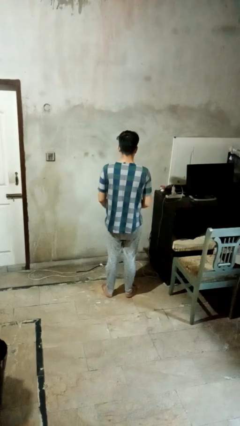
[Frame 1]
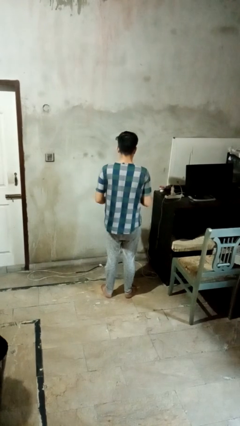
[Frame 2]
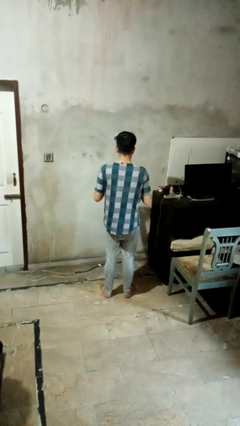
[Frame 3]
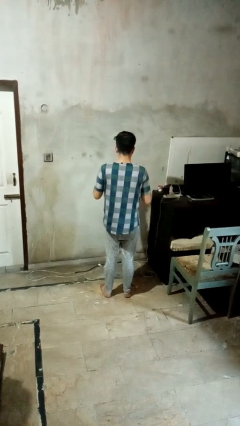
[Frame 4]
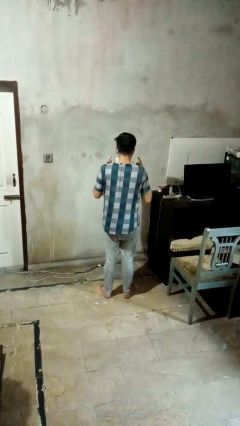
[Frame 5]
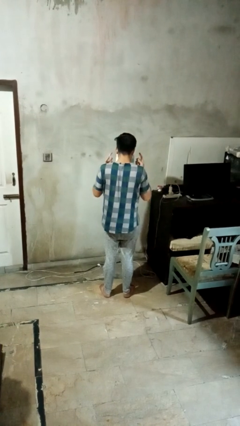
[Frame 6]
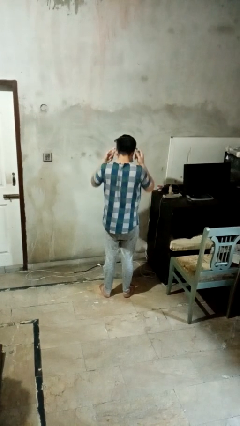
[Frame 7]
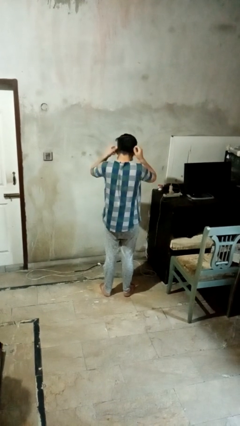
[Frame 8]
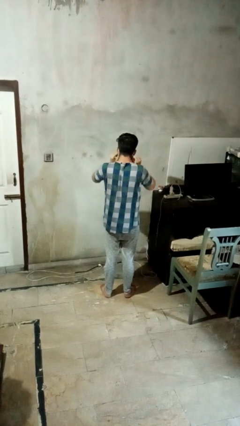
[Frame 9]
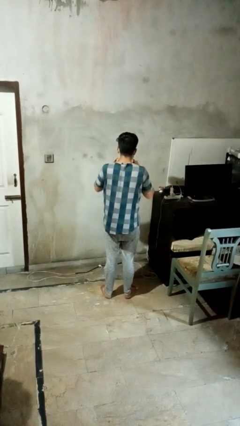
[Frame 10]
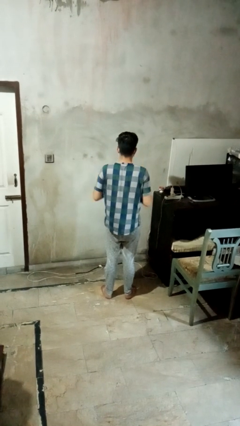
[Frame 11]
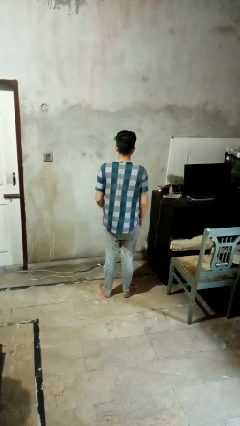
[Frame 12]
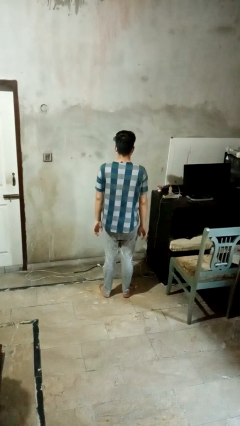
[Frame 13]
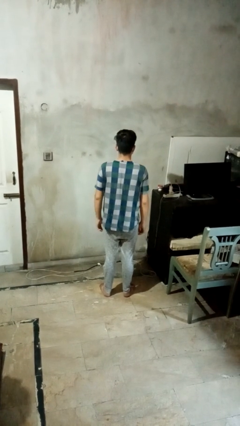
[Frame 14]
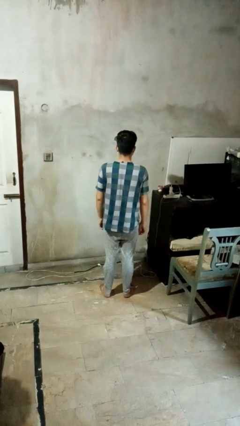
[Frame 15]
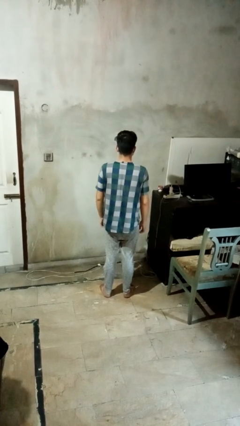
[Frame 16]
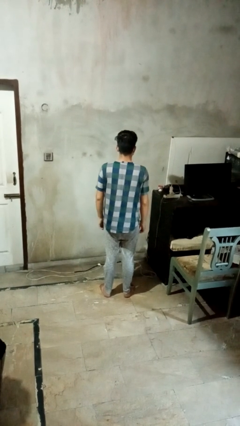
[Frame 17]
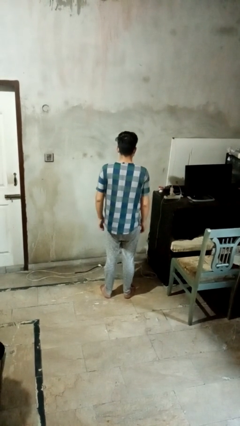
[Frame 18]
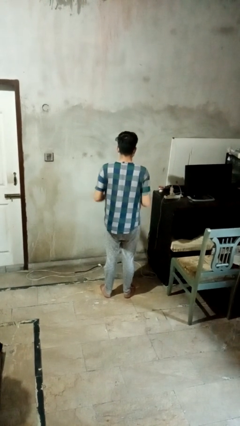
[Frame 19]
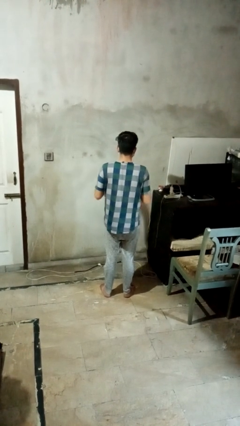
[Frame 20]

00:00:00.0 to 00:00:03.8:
person puts on facemask

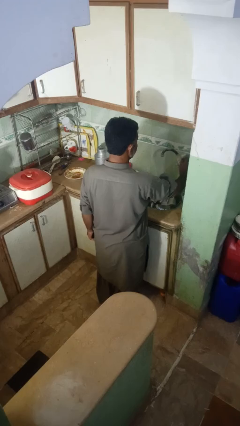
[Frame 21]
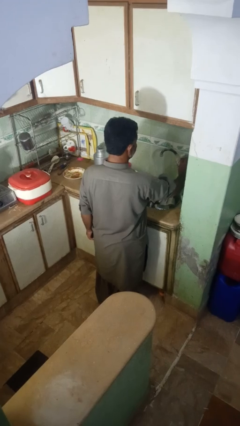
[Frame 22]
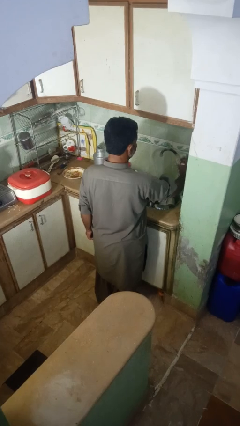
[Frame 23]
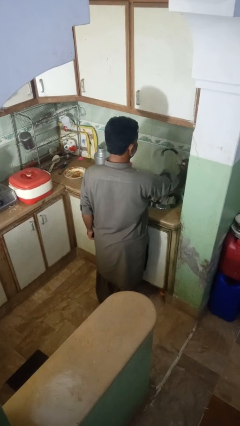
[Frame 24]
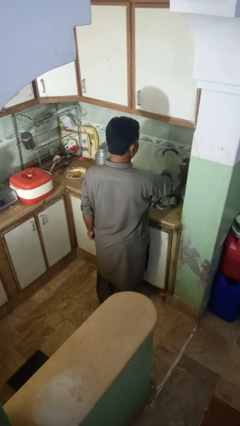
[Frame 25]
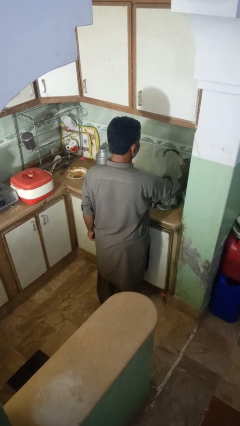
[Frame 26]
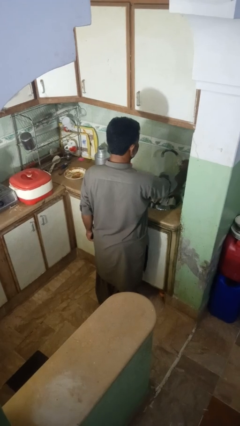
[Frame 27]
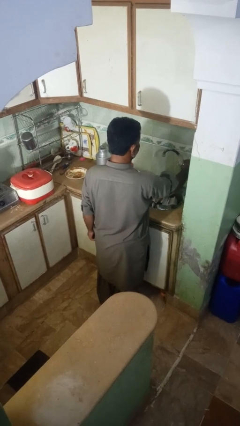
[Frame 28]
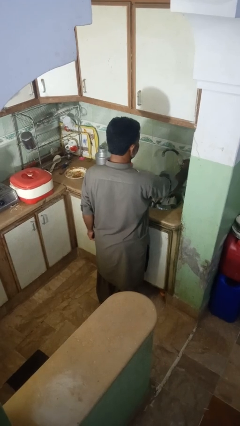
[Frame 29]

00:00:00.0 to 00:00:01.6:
person turns off faucet

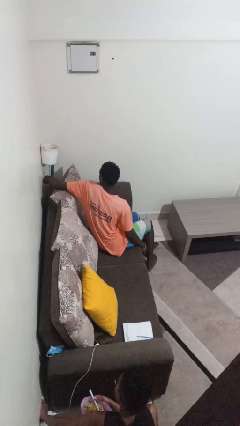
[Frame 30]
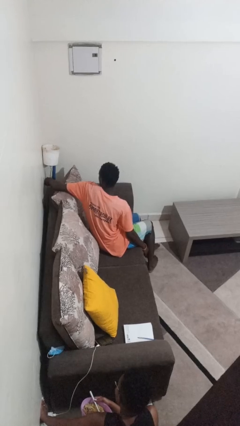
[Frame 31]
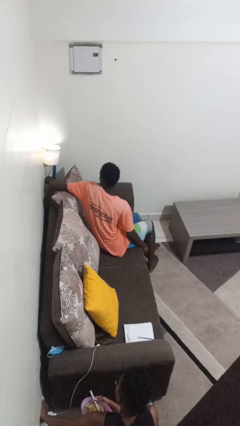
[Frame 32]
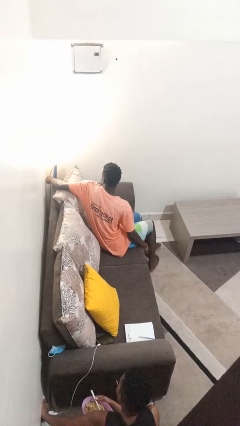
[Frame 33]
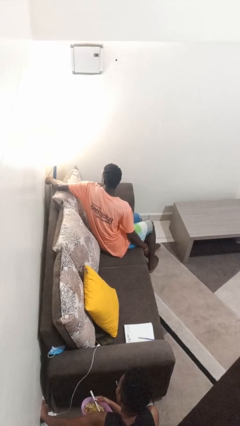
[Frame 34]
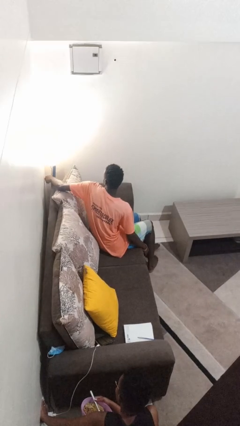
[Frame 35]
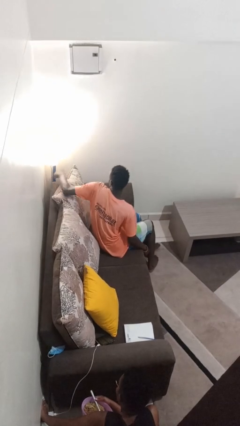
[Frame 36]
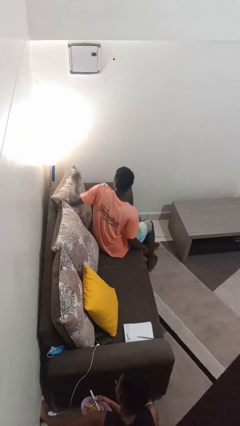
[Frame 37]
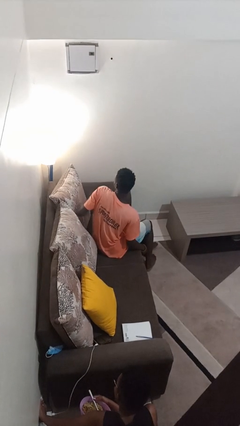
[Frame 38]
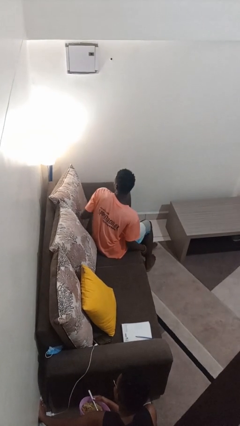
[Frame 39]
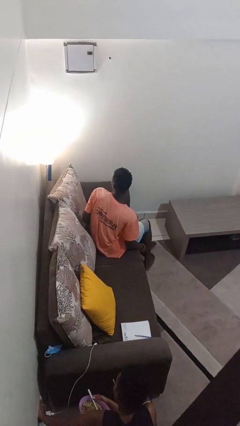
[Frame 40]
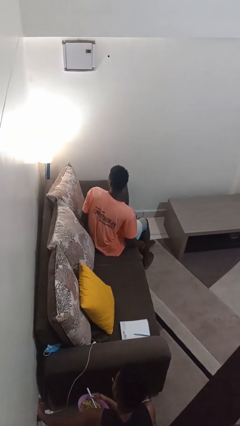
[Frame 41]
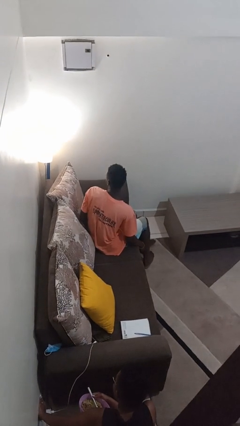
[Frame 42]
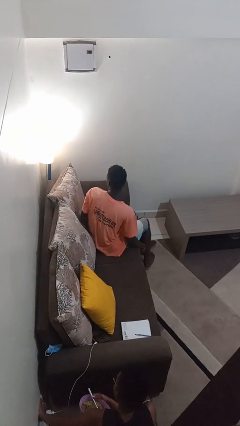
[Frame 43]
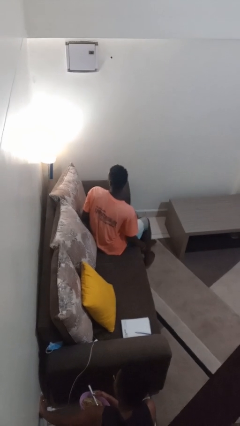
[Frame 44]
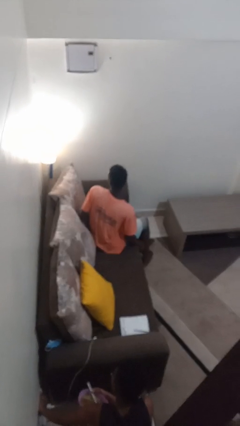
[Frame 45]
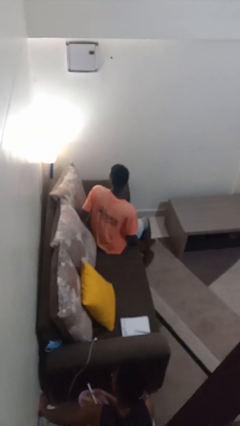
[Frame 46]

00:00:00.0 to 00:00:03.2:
person turns on lamp

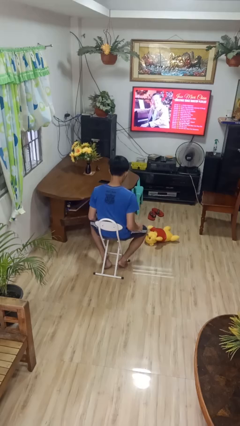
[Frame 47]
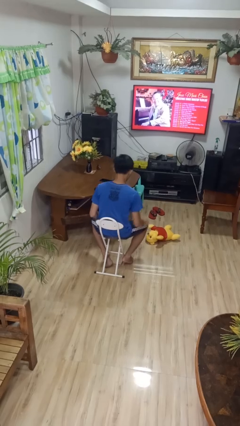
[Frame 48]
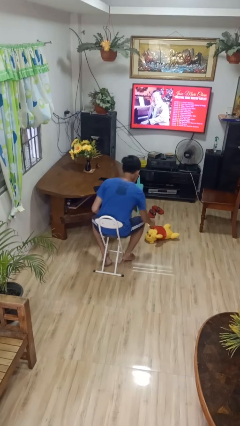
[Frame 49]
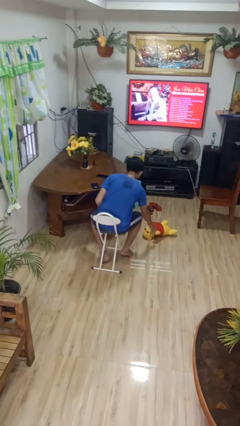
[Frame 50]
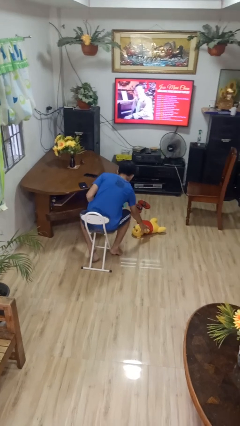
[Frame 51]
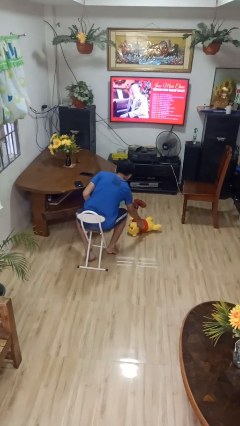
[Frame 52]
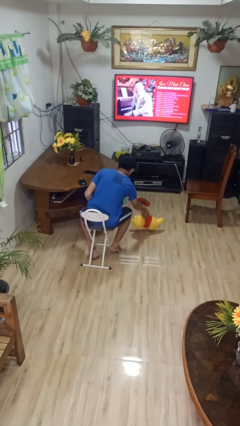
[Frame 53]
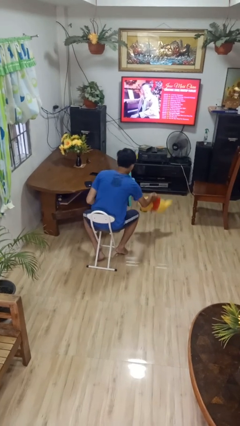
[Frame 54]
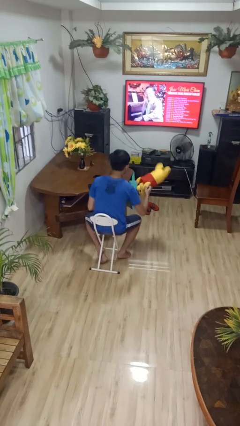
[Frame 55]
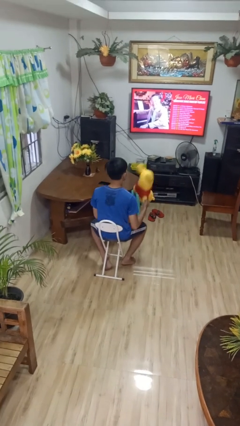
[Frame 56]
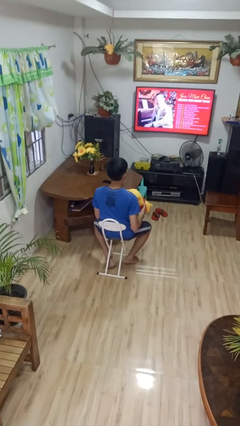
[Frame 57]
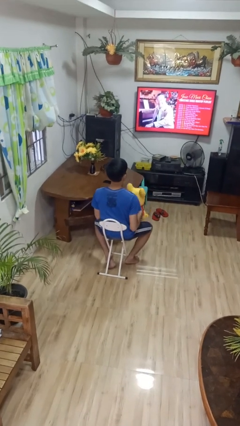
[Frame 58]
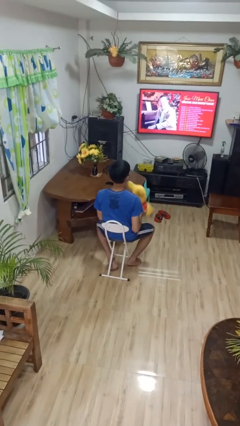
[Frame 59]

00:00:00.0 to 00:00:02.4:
person picks up object from floor

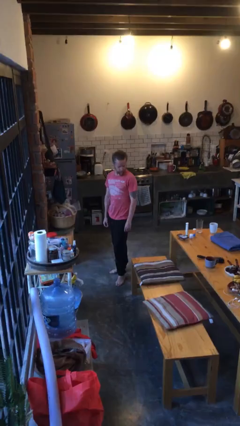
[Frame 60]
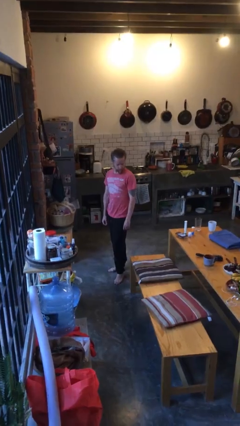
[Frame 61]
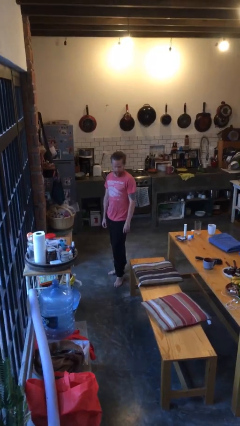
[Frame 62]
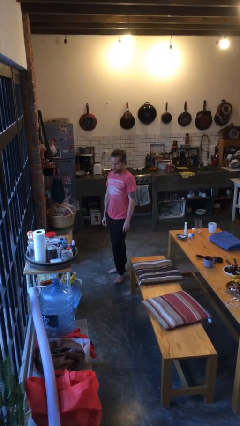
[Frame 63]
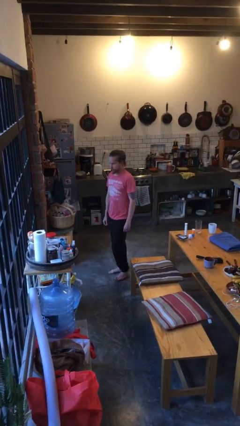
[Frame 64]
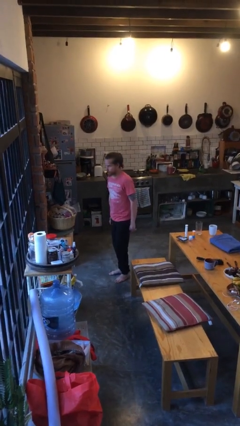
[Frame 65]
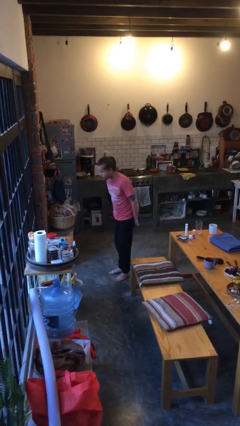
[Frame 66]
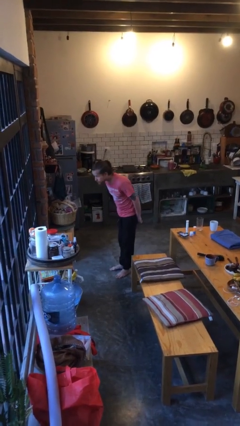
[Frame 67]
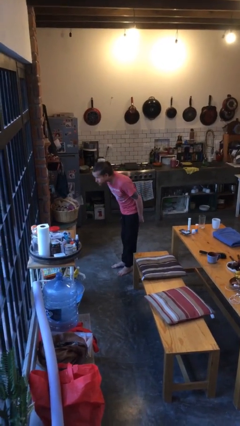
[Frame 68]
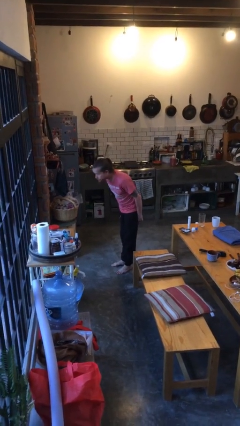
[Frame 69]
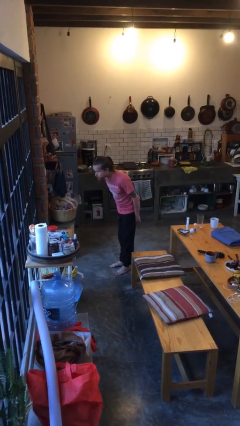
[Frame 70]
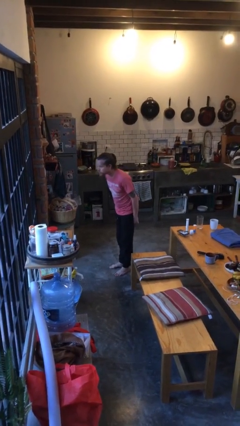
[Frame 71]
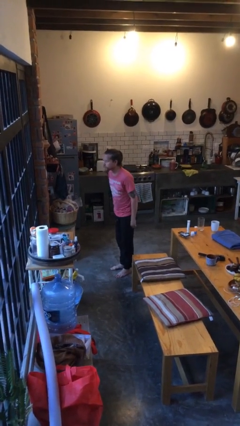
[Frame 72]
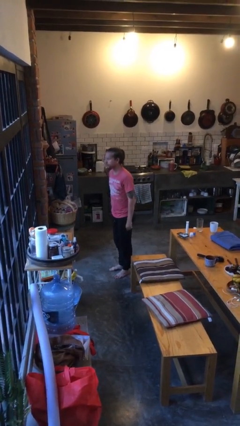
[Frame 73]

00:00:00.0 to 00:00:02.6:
person bows

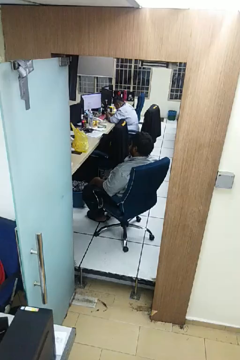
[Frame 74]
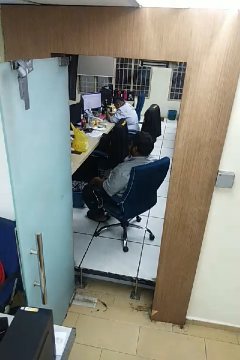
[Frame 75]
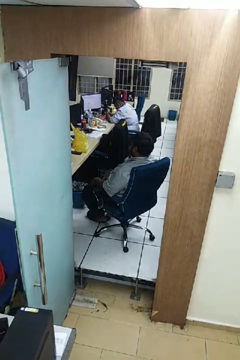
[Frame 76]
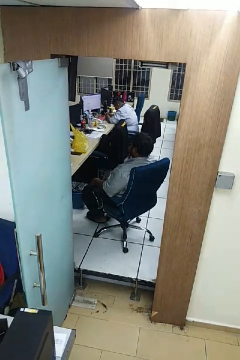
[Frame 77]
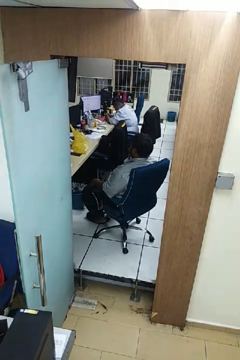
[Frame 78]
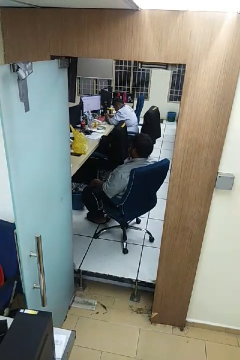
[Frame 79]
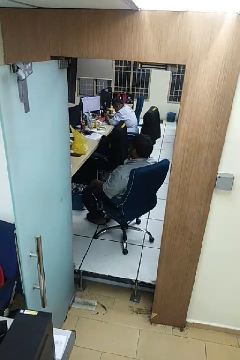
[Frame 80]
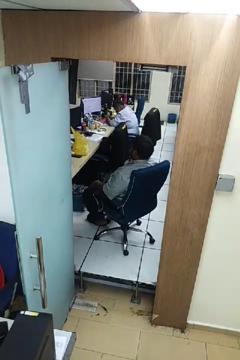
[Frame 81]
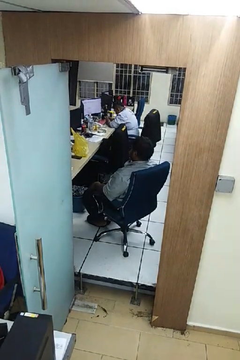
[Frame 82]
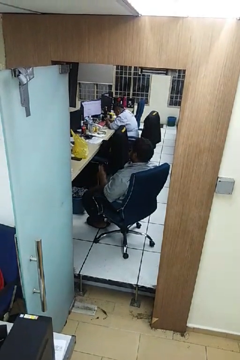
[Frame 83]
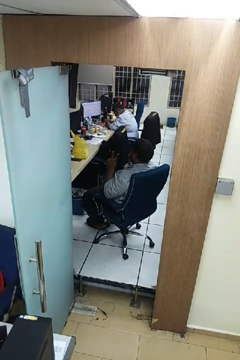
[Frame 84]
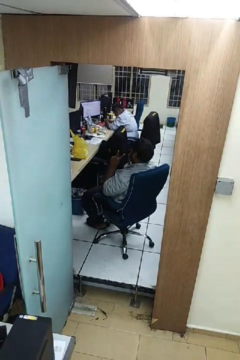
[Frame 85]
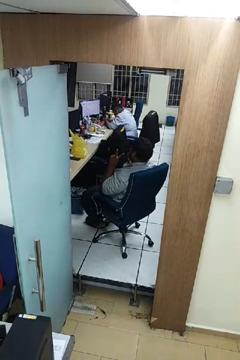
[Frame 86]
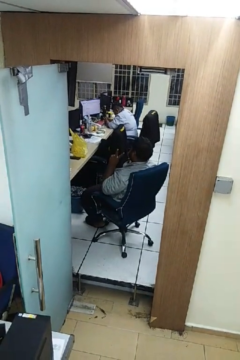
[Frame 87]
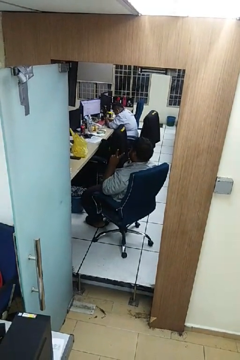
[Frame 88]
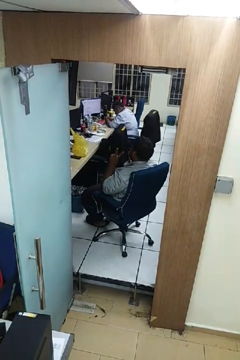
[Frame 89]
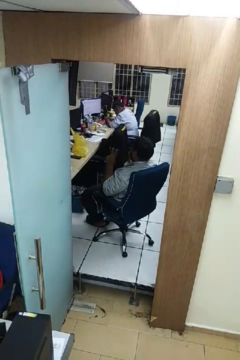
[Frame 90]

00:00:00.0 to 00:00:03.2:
person gestures peace

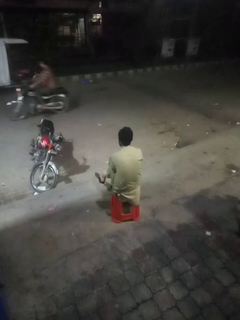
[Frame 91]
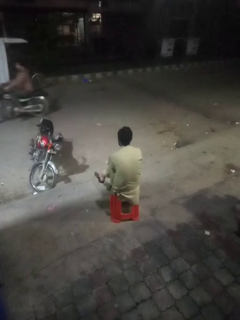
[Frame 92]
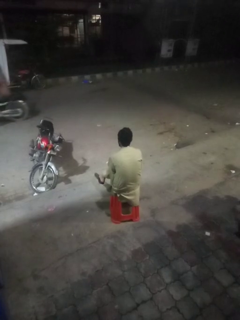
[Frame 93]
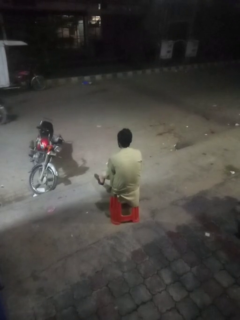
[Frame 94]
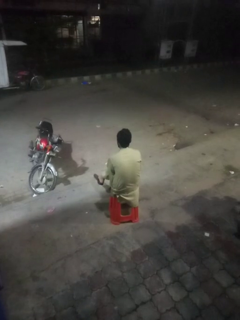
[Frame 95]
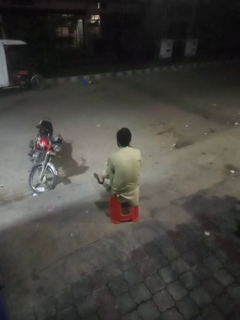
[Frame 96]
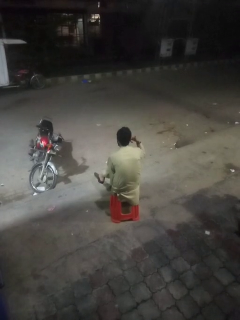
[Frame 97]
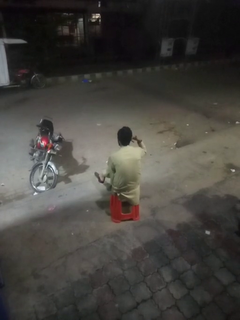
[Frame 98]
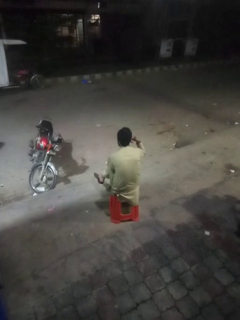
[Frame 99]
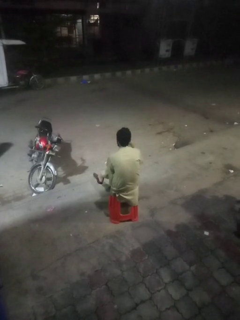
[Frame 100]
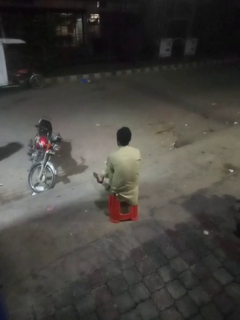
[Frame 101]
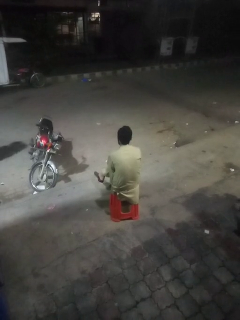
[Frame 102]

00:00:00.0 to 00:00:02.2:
person gestures call me
